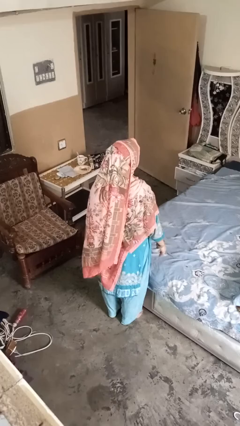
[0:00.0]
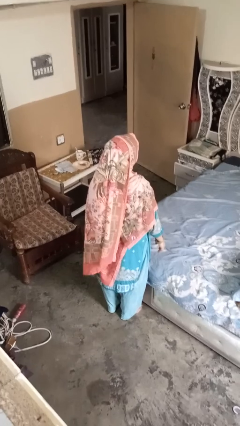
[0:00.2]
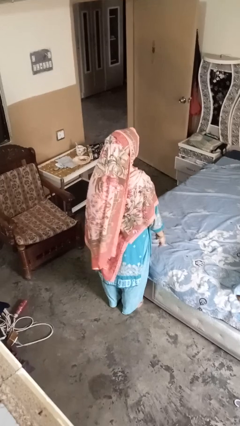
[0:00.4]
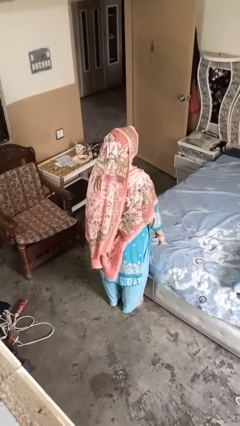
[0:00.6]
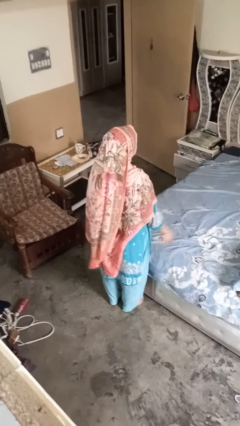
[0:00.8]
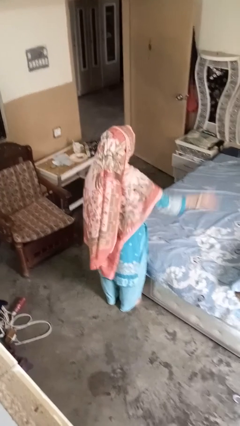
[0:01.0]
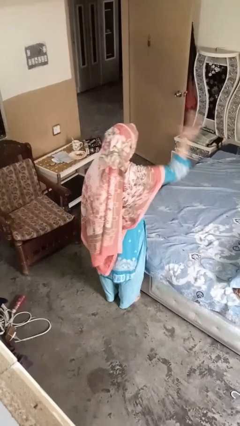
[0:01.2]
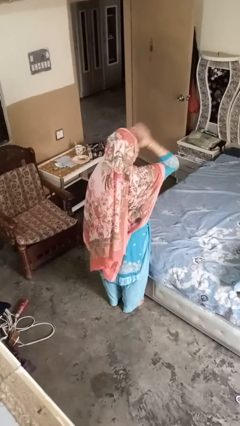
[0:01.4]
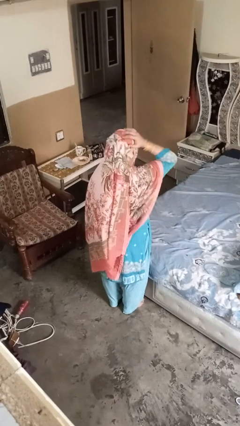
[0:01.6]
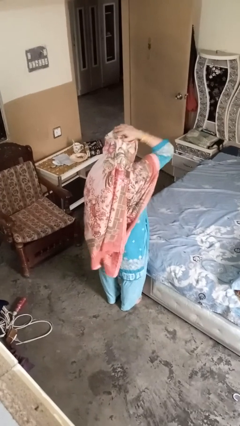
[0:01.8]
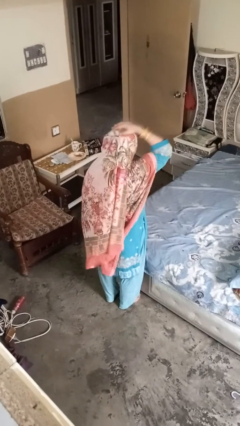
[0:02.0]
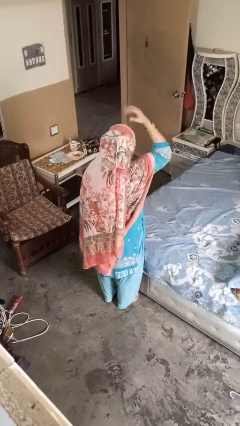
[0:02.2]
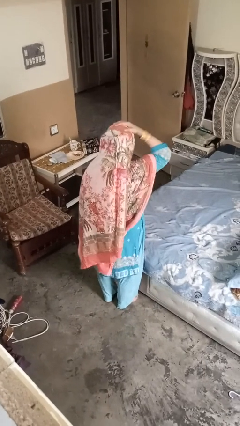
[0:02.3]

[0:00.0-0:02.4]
person pats head

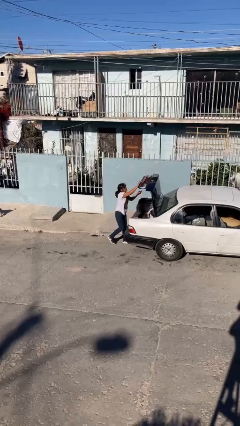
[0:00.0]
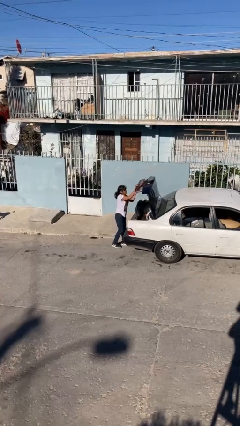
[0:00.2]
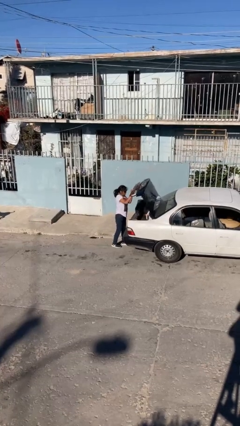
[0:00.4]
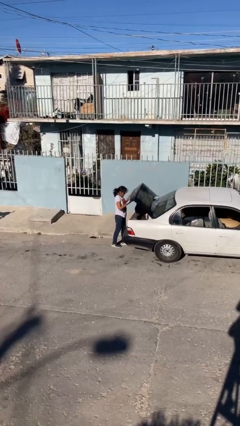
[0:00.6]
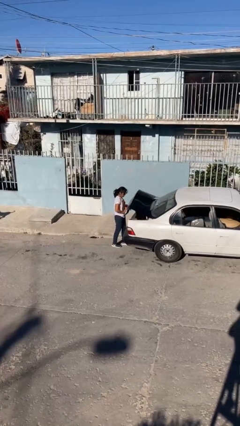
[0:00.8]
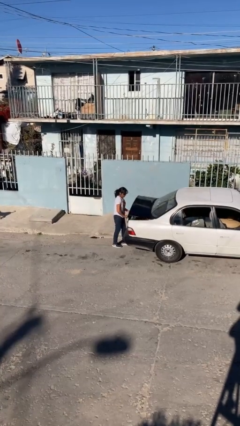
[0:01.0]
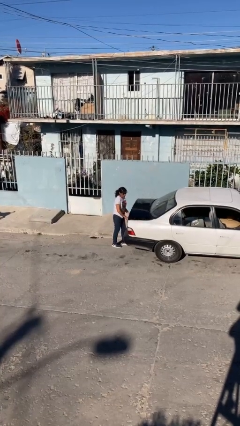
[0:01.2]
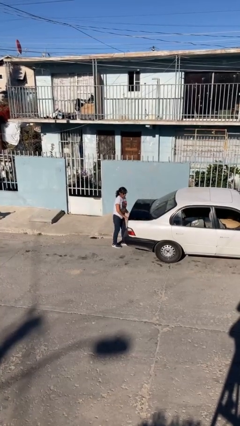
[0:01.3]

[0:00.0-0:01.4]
person closes car trunk

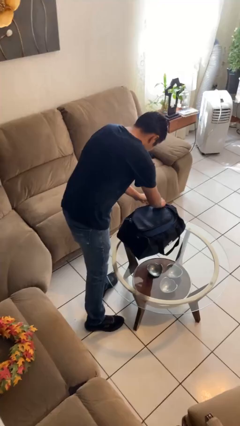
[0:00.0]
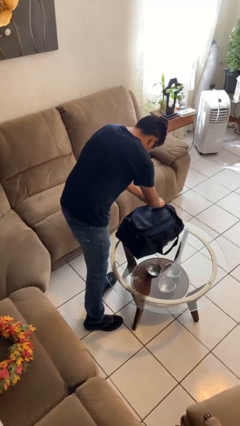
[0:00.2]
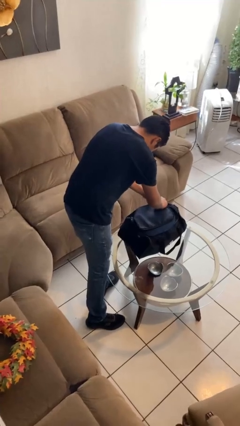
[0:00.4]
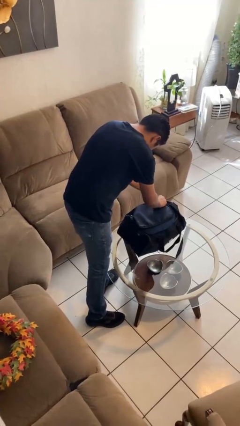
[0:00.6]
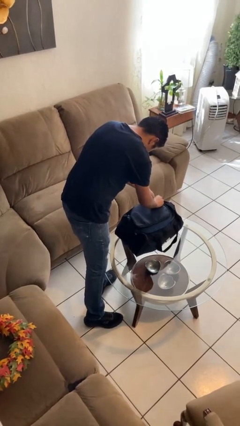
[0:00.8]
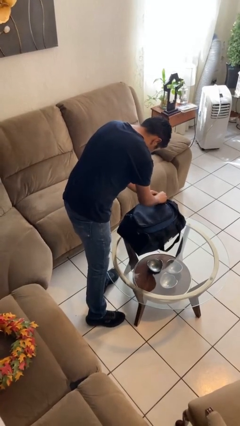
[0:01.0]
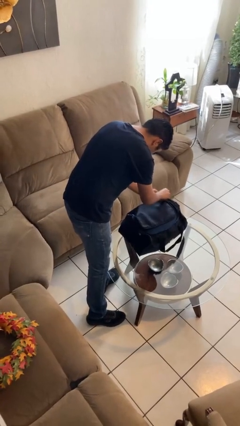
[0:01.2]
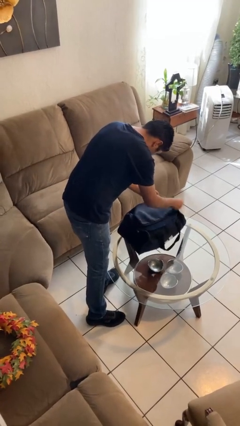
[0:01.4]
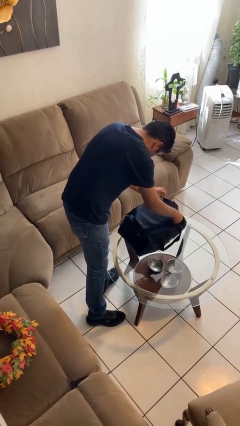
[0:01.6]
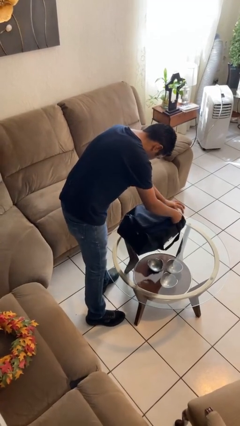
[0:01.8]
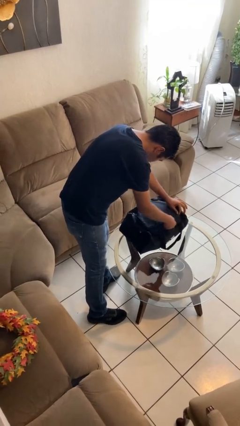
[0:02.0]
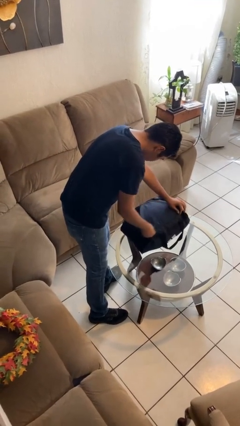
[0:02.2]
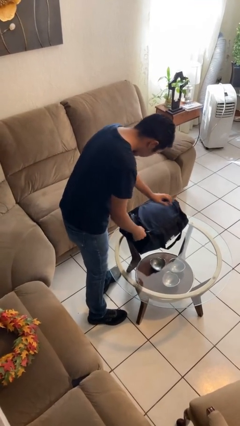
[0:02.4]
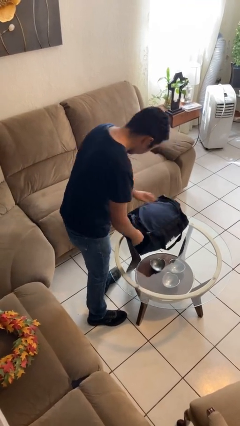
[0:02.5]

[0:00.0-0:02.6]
person closes suitcase

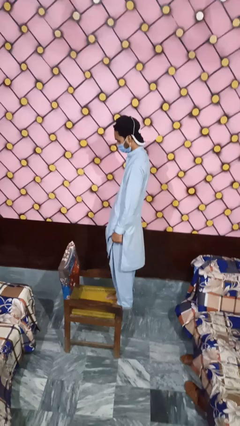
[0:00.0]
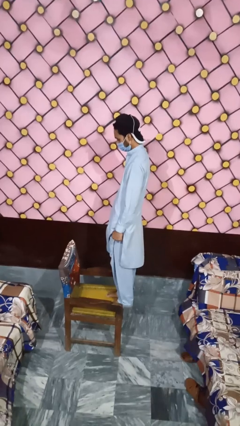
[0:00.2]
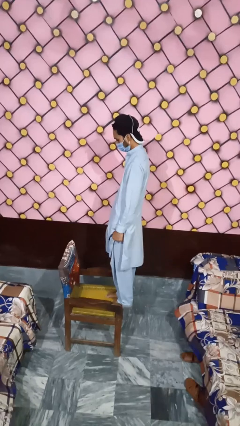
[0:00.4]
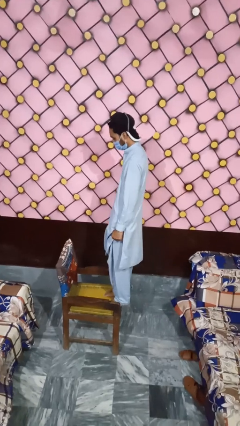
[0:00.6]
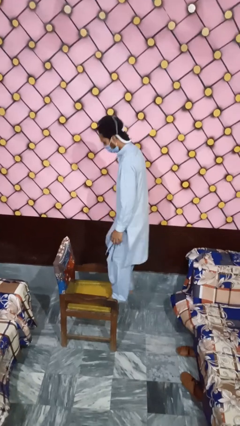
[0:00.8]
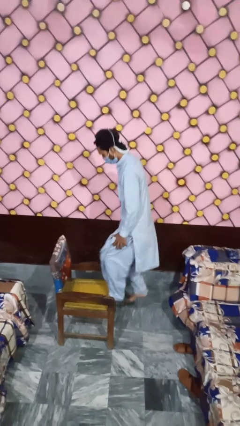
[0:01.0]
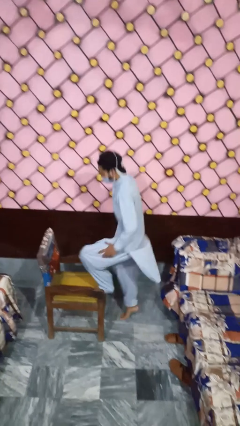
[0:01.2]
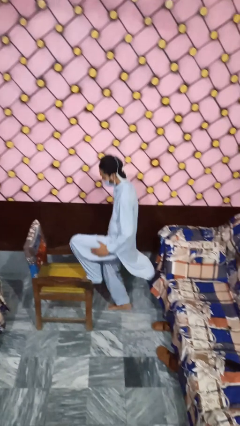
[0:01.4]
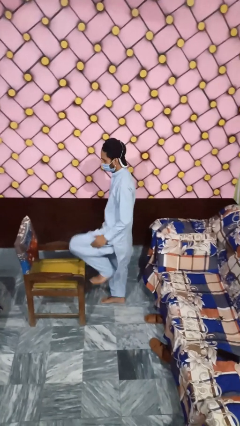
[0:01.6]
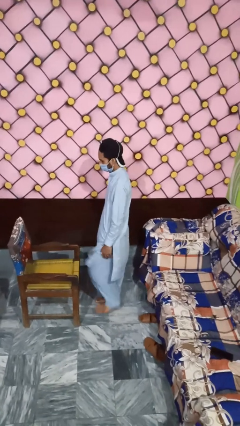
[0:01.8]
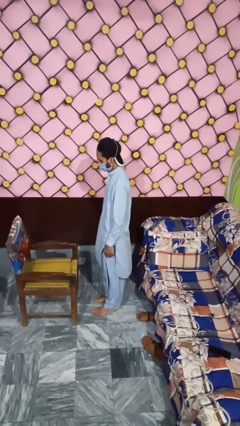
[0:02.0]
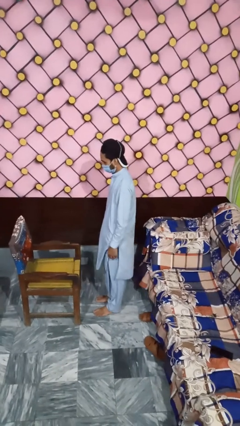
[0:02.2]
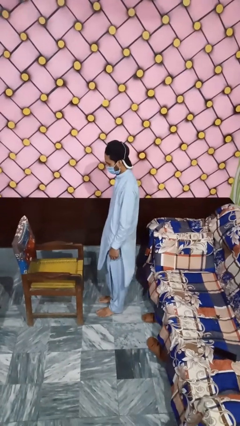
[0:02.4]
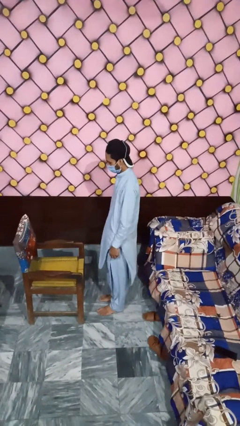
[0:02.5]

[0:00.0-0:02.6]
person climbs off chair

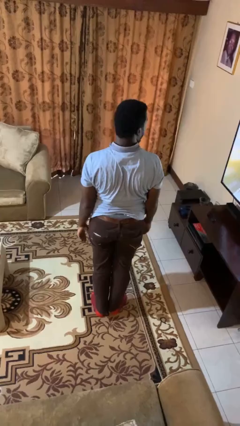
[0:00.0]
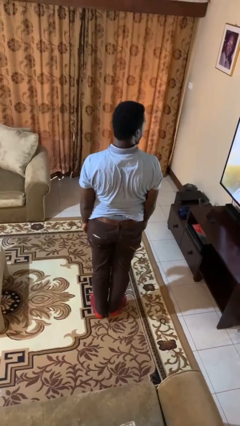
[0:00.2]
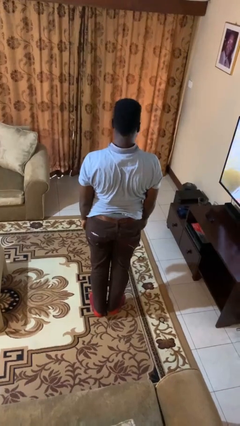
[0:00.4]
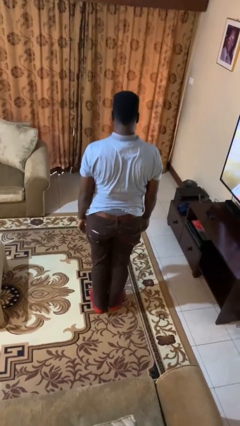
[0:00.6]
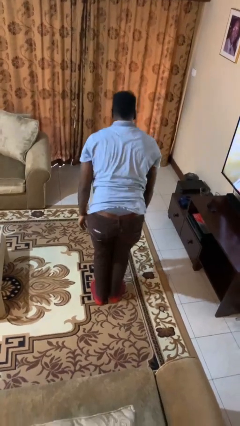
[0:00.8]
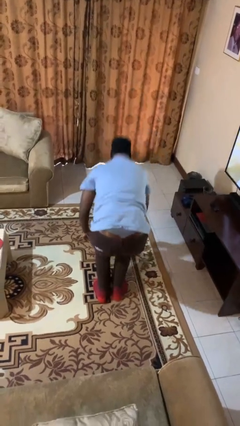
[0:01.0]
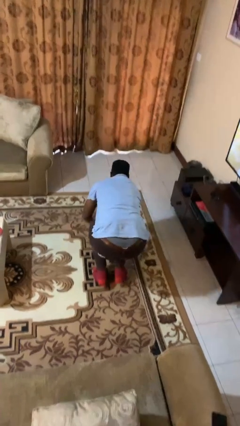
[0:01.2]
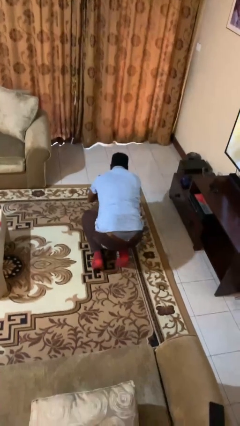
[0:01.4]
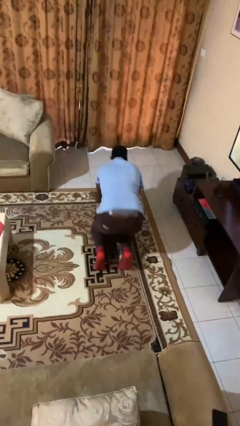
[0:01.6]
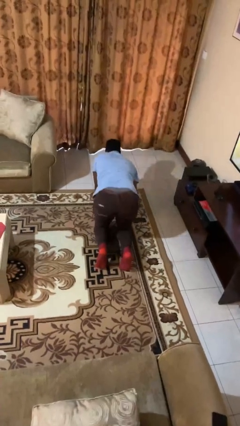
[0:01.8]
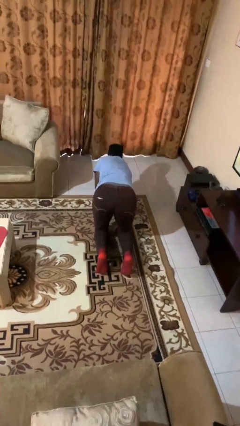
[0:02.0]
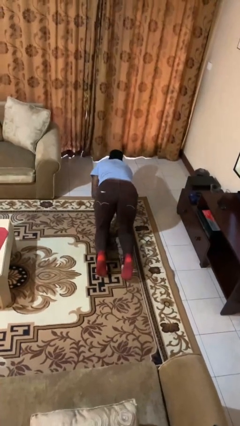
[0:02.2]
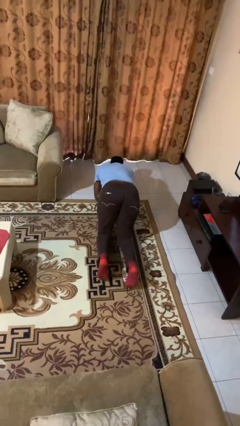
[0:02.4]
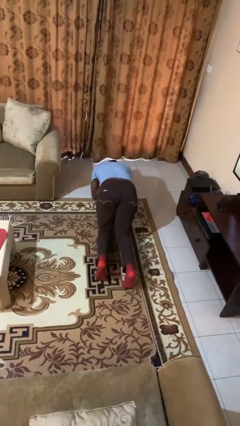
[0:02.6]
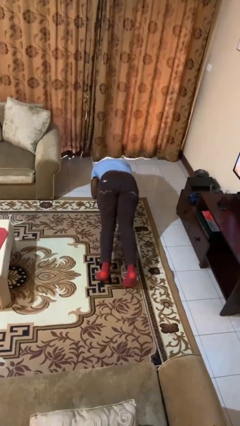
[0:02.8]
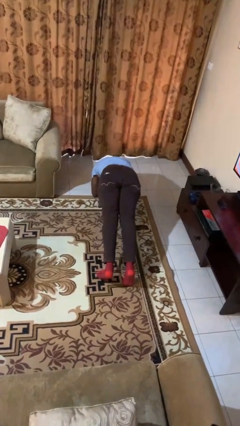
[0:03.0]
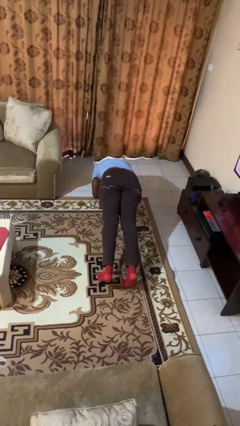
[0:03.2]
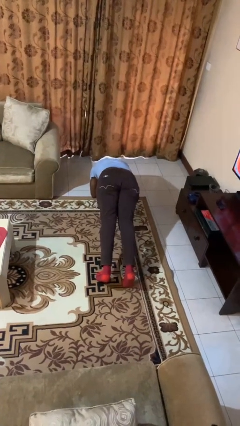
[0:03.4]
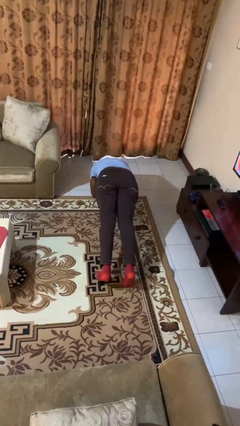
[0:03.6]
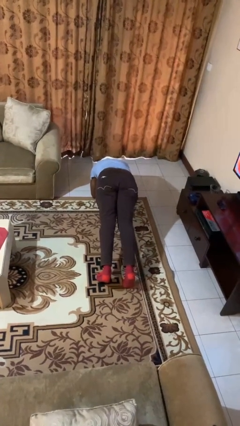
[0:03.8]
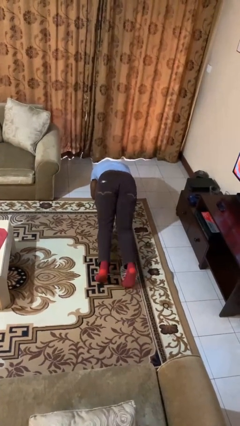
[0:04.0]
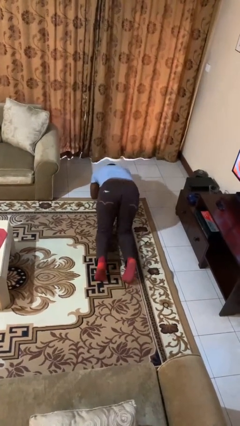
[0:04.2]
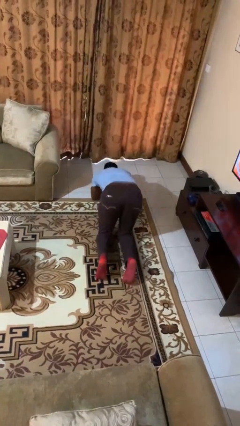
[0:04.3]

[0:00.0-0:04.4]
person exercises with plank

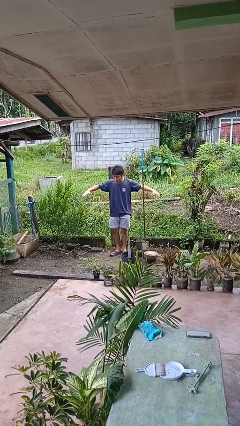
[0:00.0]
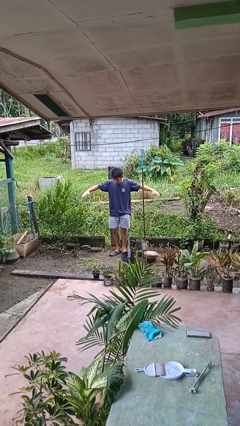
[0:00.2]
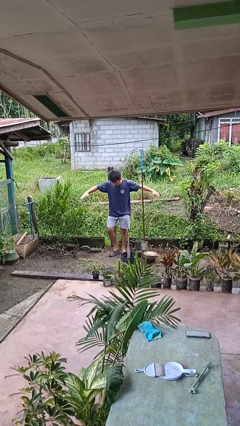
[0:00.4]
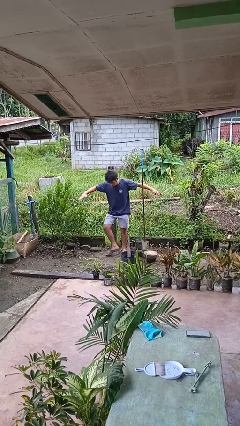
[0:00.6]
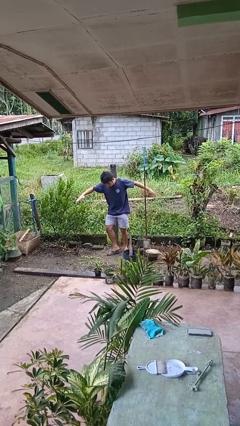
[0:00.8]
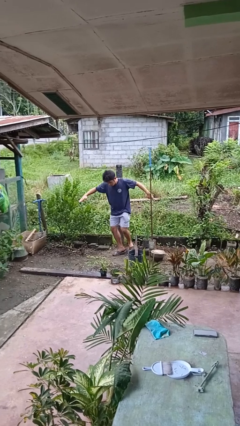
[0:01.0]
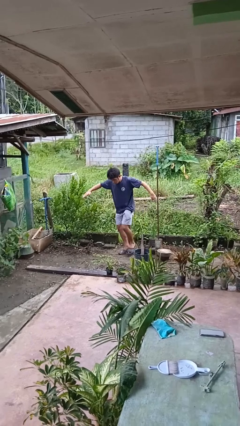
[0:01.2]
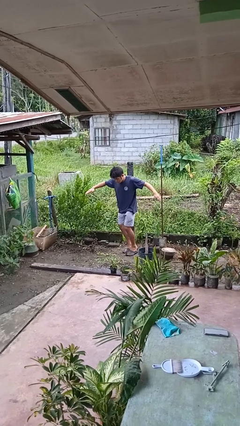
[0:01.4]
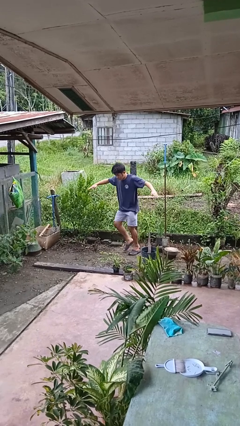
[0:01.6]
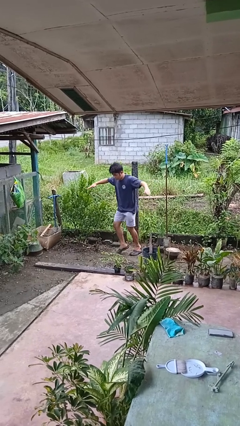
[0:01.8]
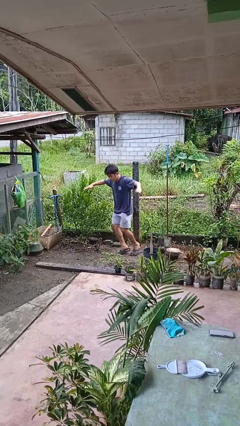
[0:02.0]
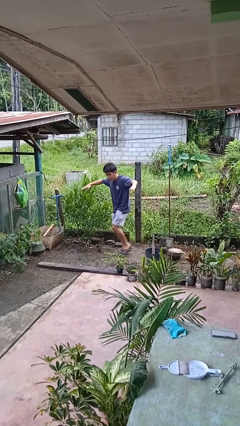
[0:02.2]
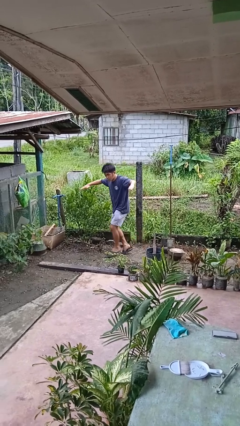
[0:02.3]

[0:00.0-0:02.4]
person walks tiptoe

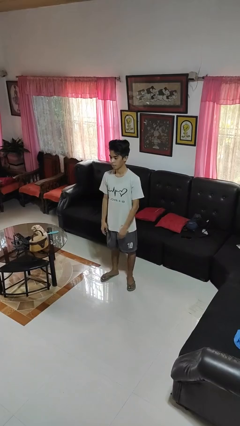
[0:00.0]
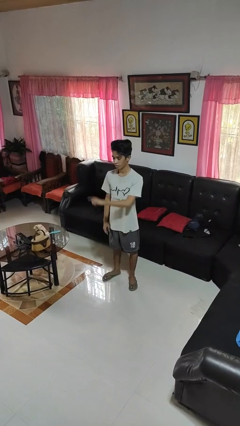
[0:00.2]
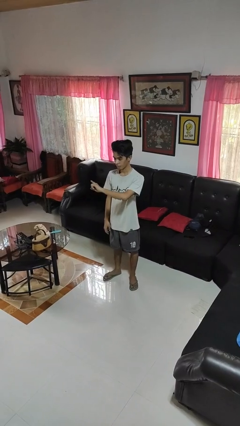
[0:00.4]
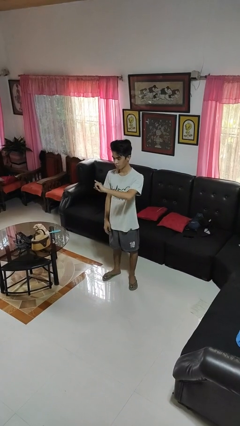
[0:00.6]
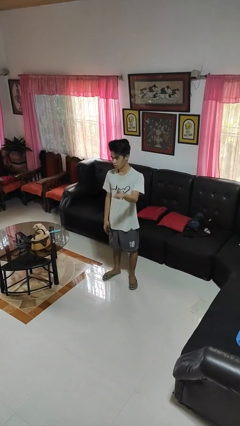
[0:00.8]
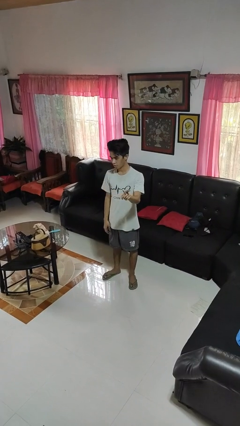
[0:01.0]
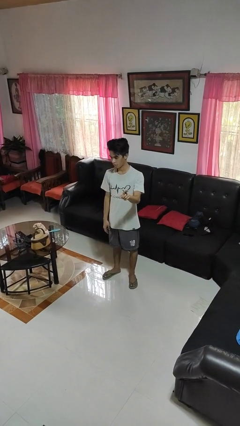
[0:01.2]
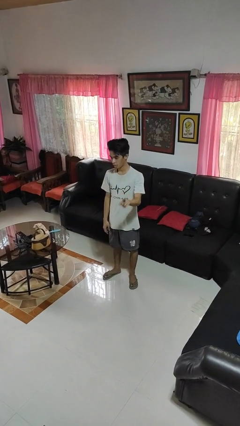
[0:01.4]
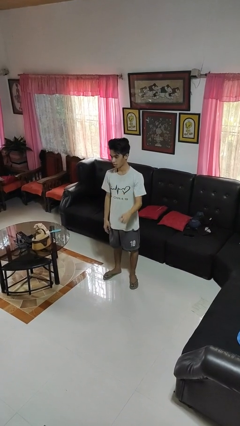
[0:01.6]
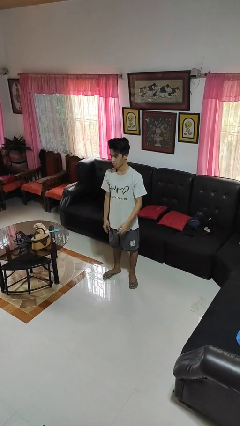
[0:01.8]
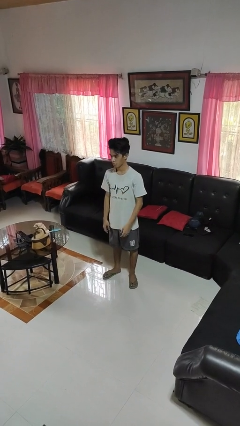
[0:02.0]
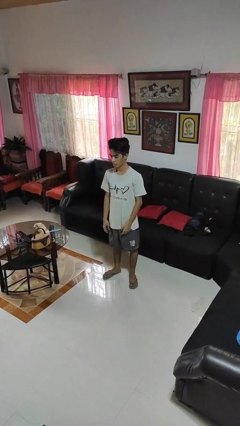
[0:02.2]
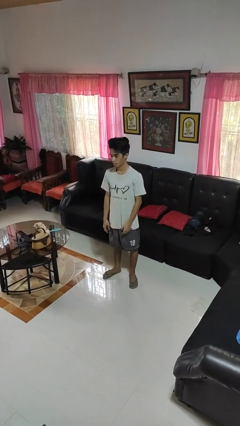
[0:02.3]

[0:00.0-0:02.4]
person gestures swipe left
